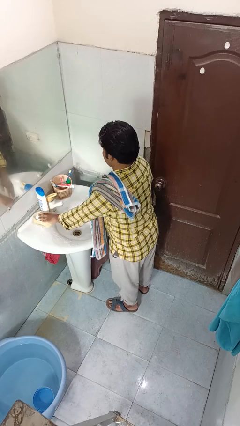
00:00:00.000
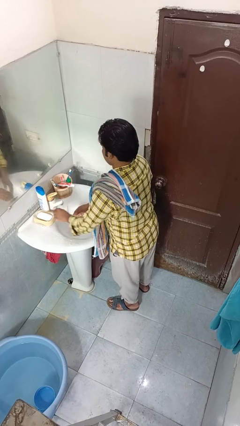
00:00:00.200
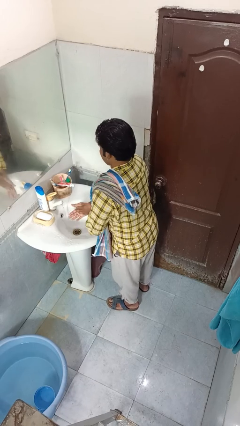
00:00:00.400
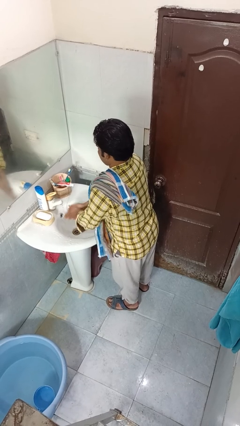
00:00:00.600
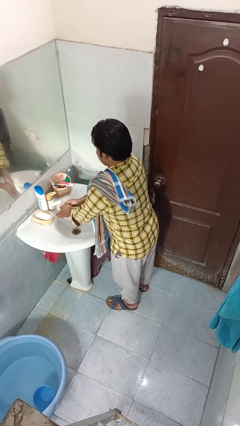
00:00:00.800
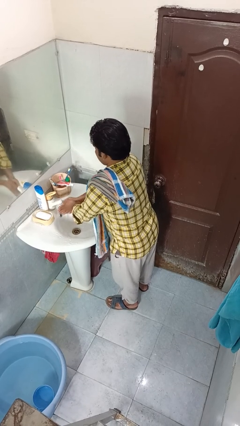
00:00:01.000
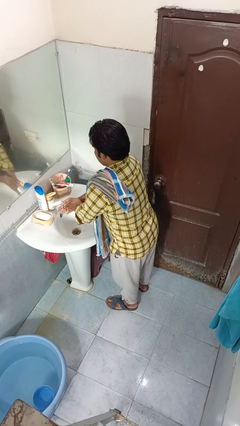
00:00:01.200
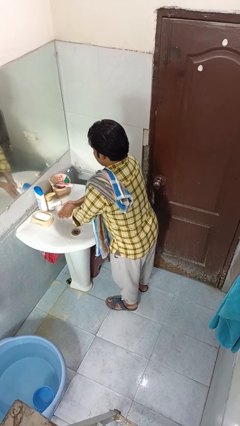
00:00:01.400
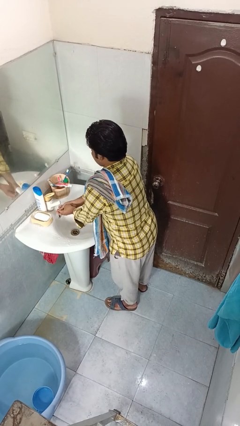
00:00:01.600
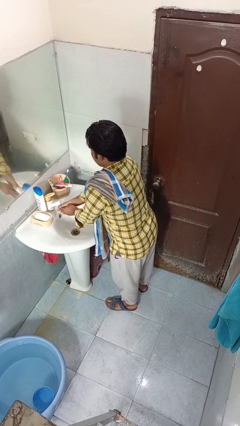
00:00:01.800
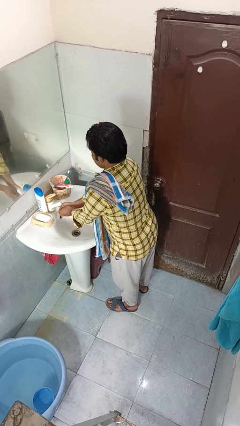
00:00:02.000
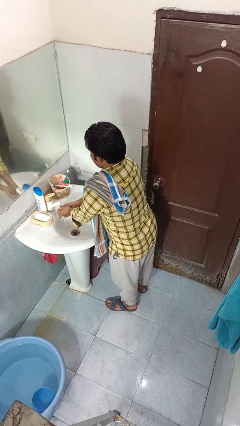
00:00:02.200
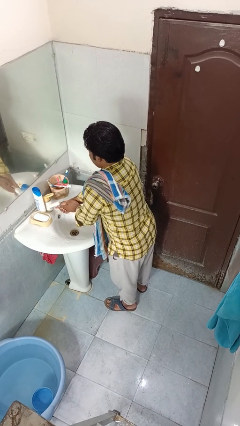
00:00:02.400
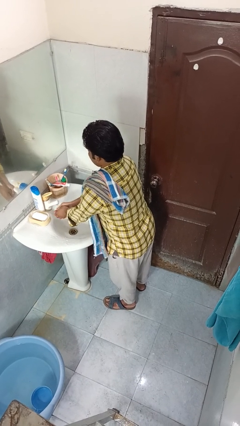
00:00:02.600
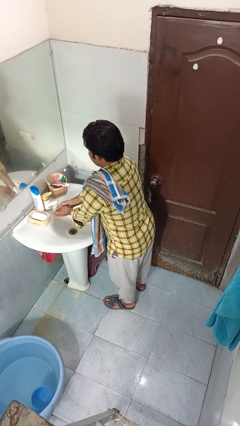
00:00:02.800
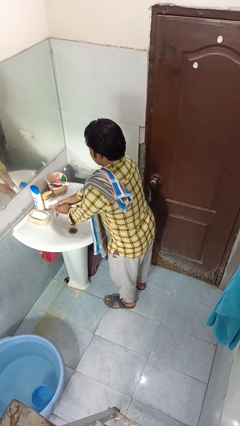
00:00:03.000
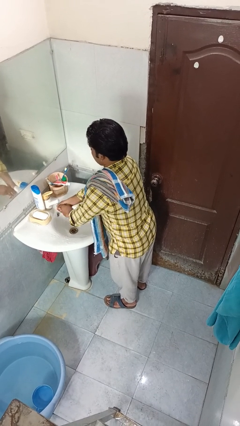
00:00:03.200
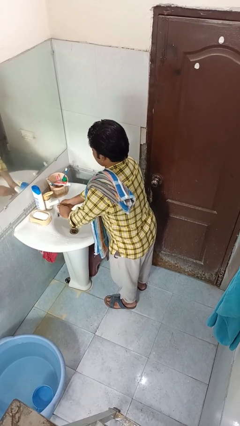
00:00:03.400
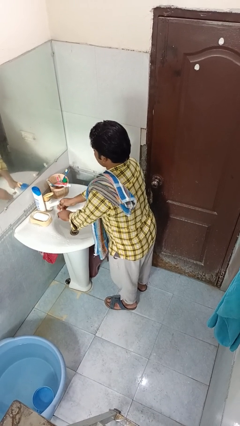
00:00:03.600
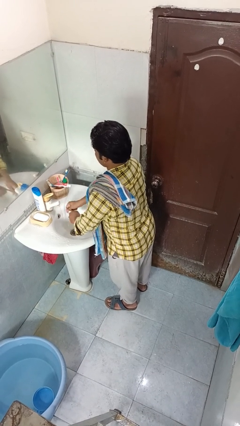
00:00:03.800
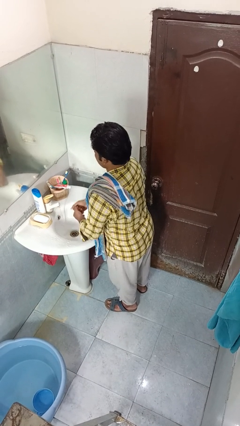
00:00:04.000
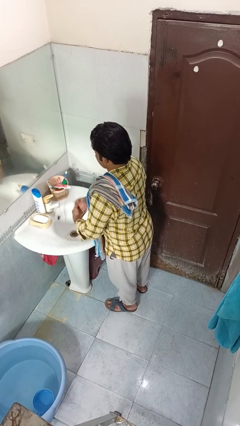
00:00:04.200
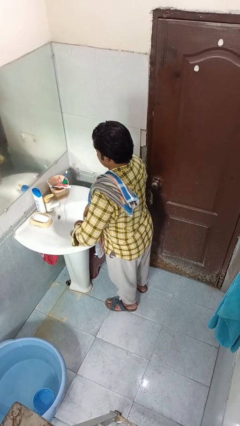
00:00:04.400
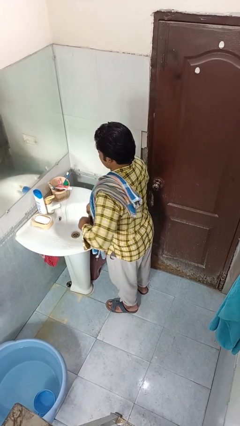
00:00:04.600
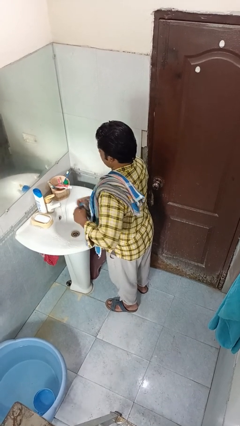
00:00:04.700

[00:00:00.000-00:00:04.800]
person washes hands

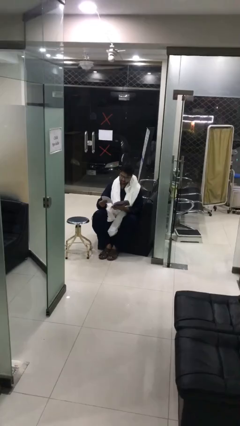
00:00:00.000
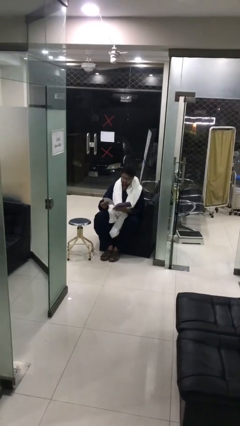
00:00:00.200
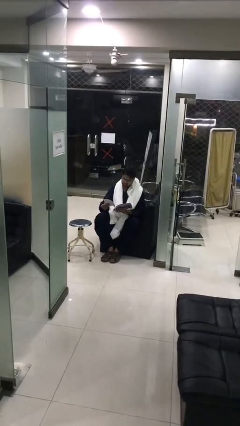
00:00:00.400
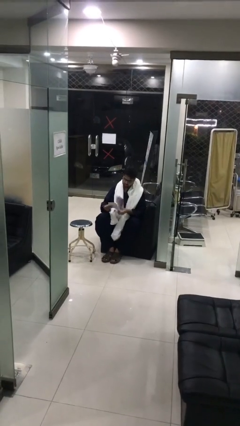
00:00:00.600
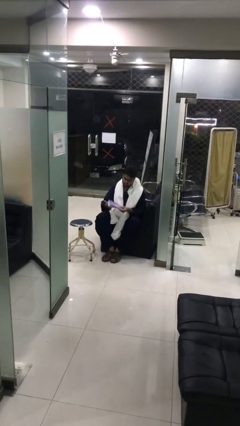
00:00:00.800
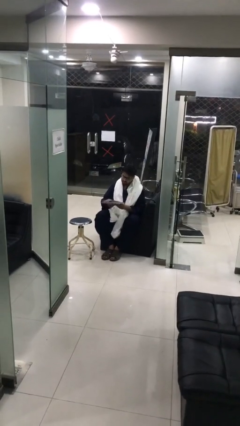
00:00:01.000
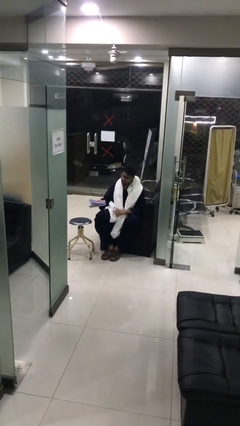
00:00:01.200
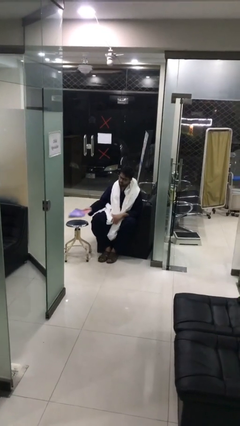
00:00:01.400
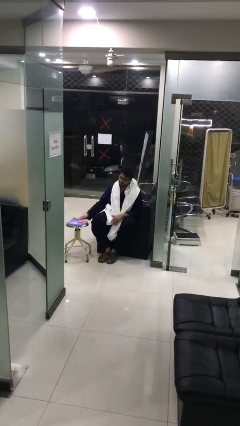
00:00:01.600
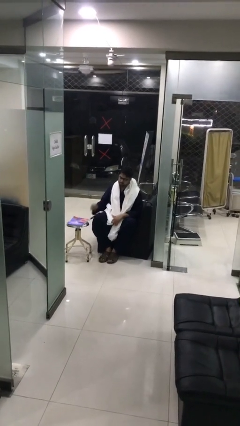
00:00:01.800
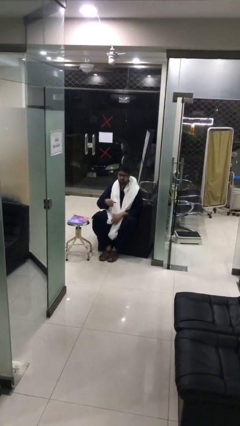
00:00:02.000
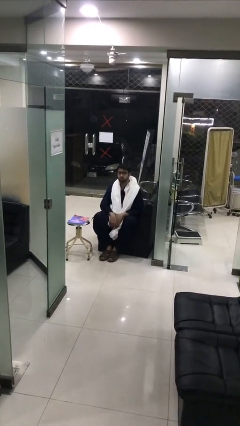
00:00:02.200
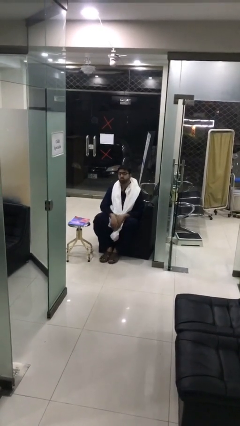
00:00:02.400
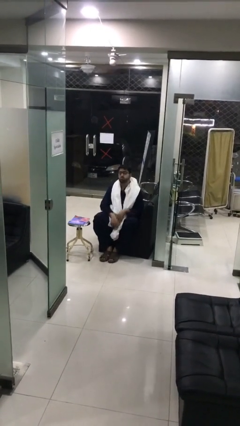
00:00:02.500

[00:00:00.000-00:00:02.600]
person puts down object on table

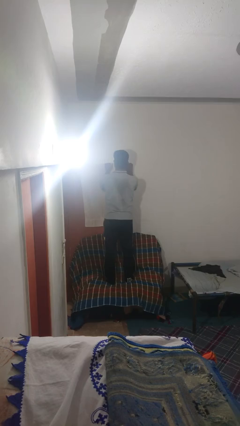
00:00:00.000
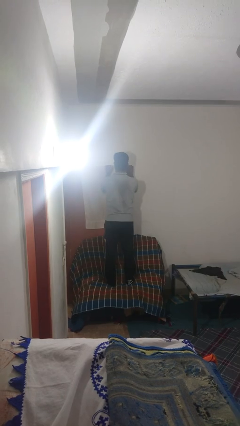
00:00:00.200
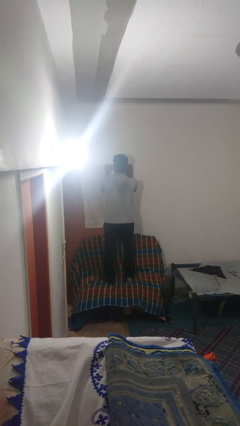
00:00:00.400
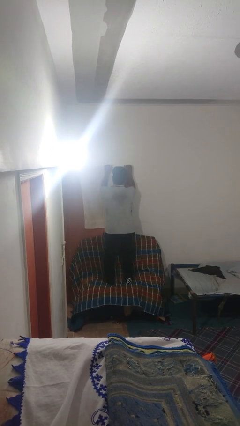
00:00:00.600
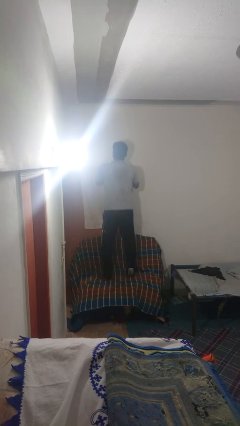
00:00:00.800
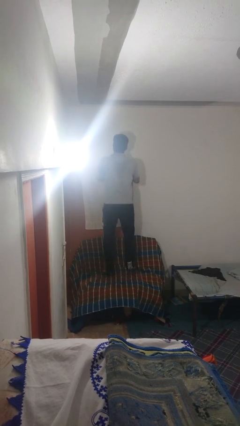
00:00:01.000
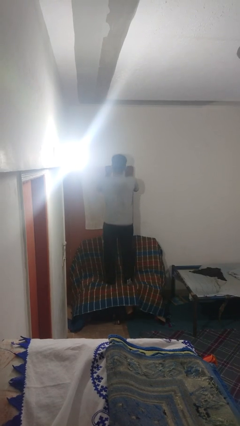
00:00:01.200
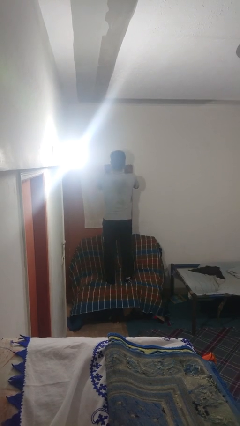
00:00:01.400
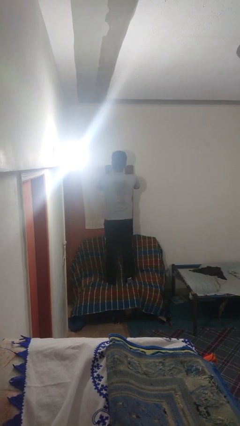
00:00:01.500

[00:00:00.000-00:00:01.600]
person jumps on couch

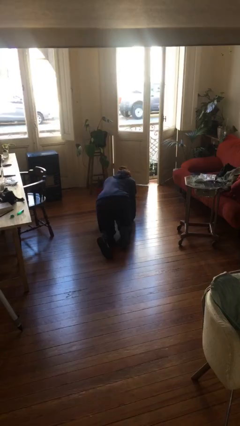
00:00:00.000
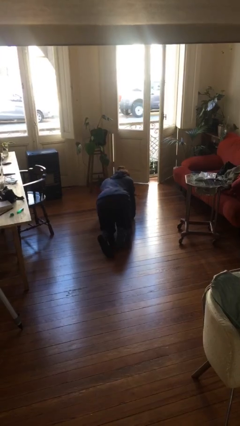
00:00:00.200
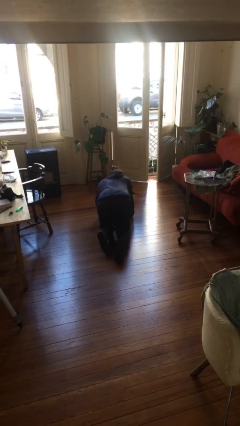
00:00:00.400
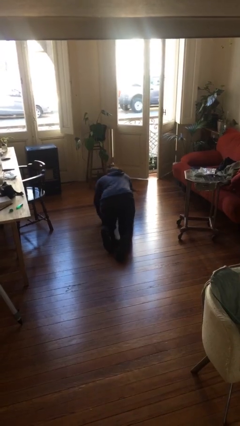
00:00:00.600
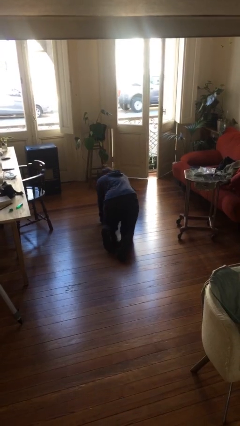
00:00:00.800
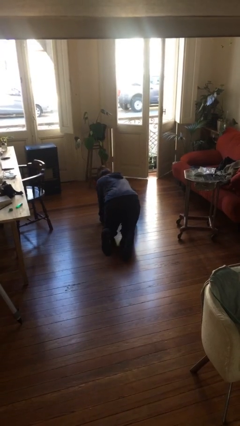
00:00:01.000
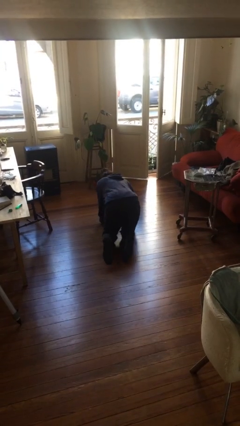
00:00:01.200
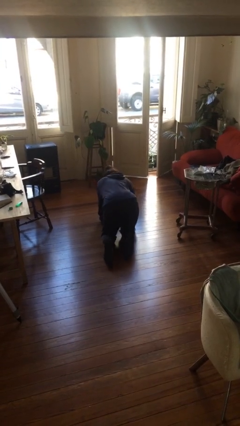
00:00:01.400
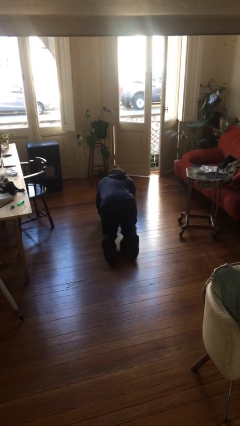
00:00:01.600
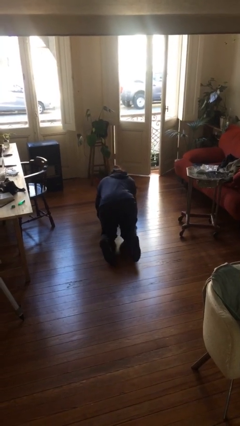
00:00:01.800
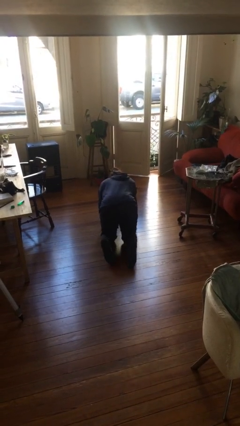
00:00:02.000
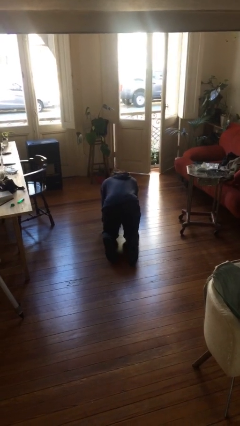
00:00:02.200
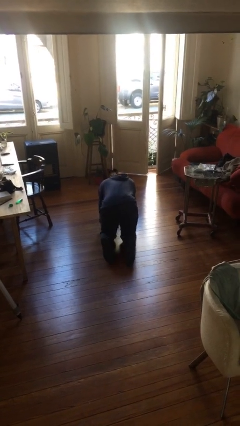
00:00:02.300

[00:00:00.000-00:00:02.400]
person crawls

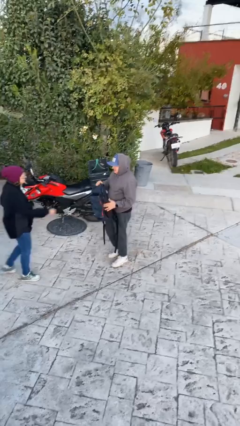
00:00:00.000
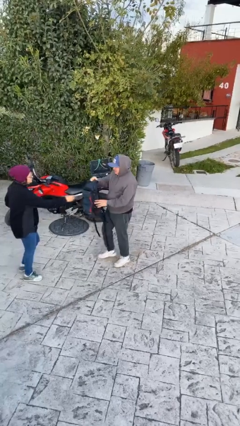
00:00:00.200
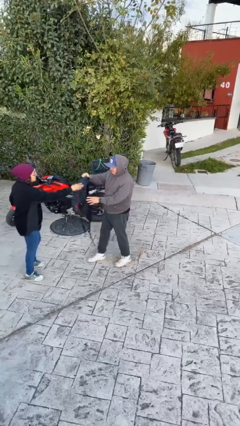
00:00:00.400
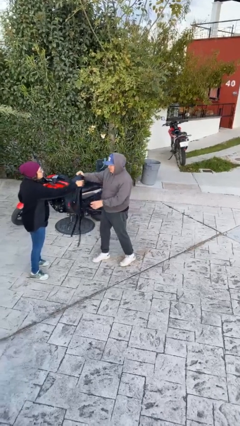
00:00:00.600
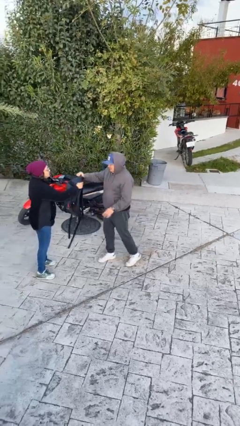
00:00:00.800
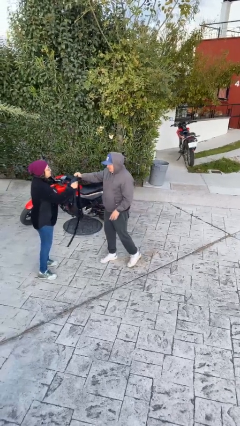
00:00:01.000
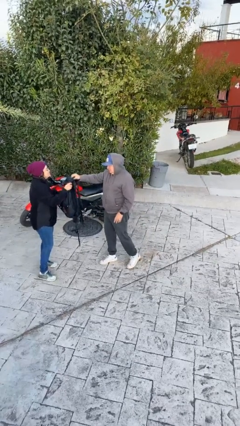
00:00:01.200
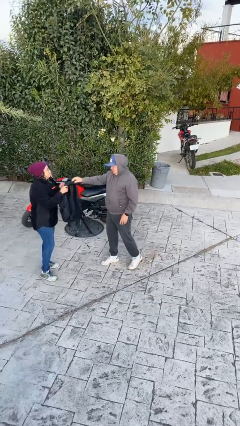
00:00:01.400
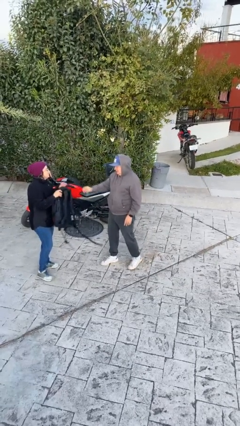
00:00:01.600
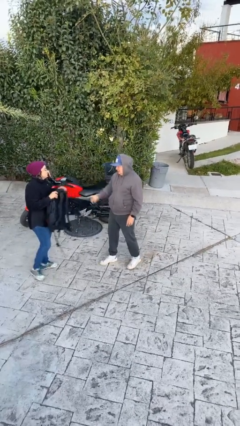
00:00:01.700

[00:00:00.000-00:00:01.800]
person transfers object to person

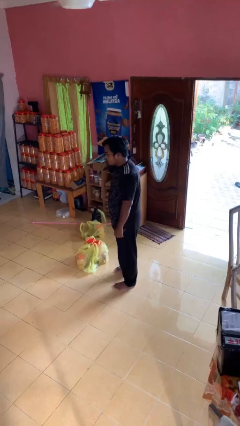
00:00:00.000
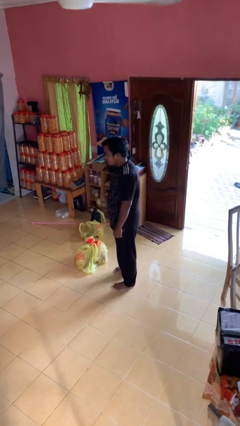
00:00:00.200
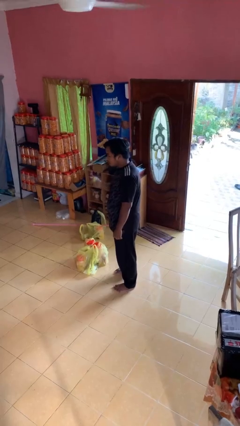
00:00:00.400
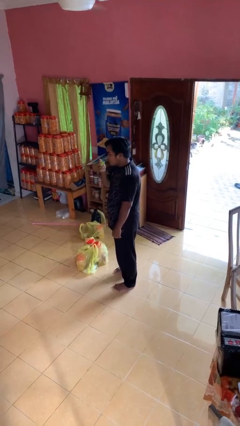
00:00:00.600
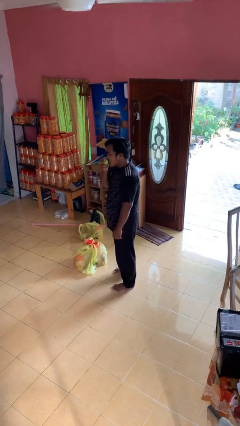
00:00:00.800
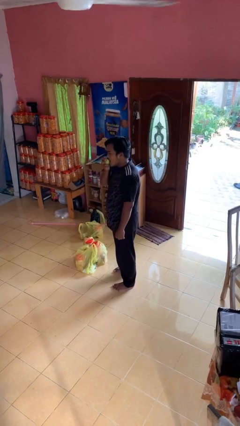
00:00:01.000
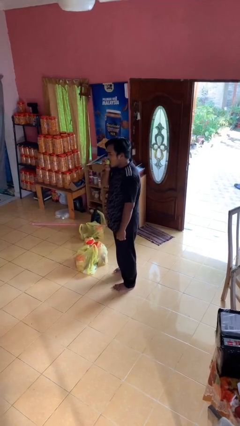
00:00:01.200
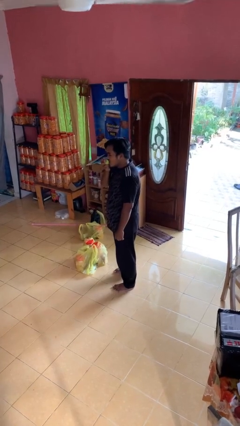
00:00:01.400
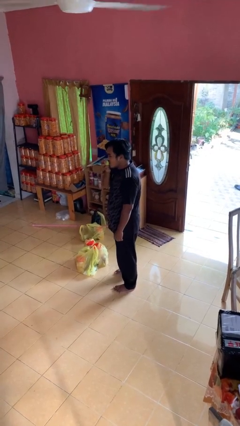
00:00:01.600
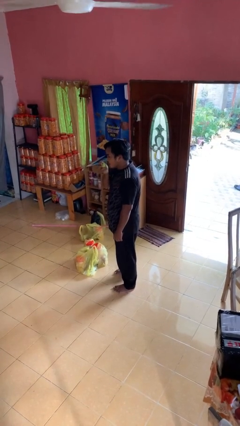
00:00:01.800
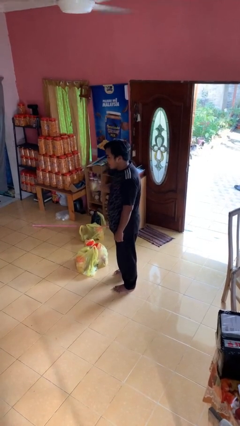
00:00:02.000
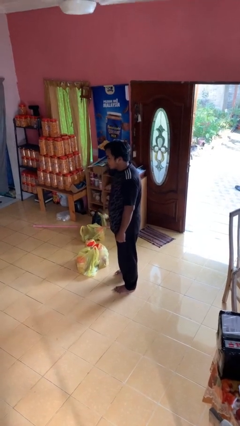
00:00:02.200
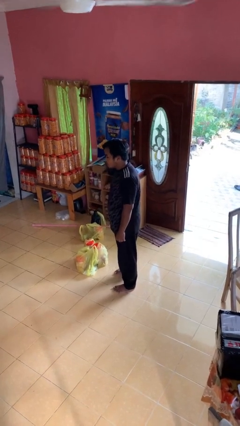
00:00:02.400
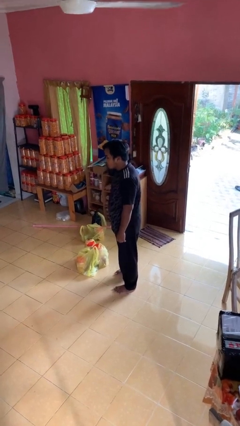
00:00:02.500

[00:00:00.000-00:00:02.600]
person eats apple

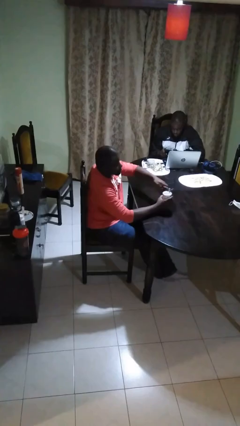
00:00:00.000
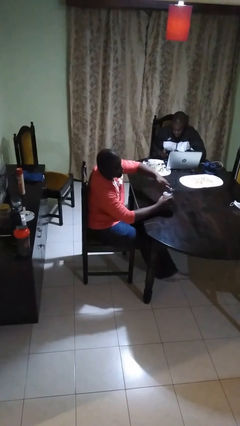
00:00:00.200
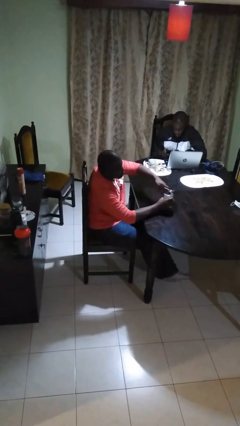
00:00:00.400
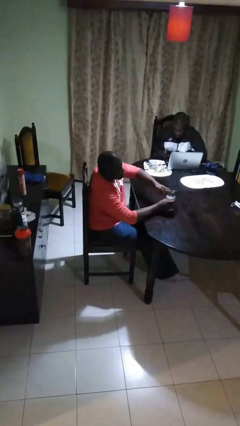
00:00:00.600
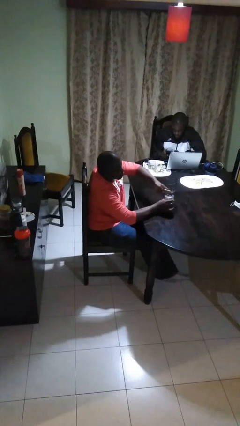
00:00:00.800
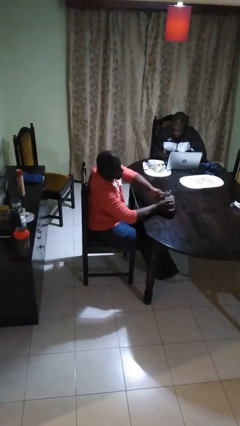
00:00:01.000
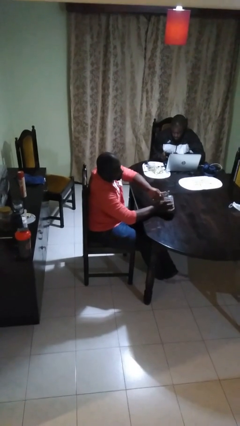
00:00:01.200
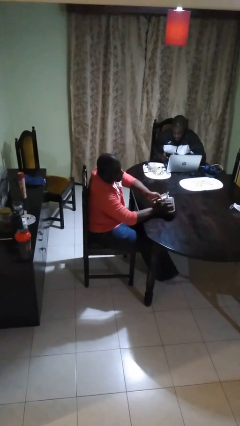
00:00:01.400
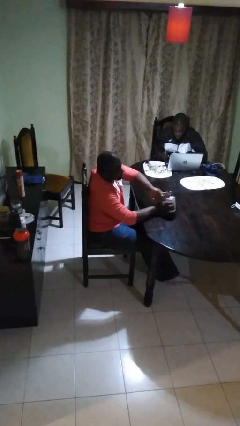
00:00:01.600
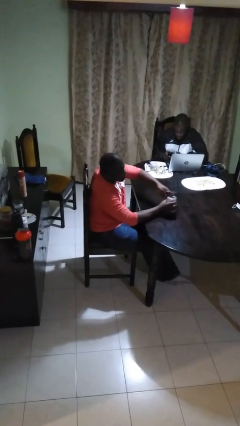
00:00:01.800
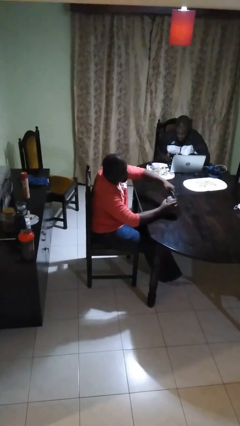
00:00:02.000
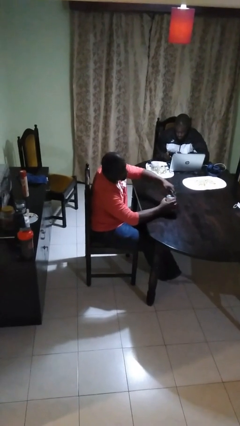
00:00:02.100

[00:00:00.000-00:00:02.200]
person opens can with can opener
